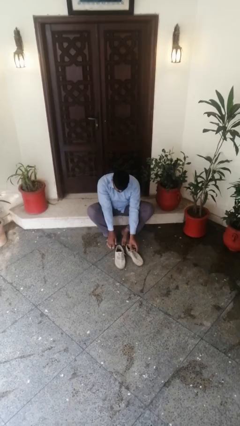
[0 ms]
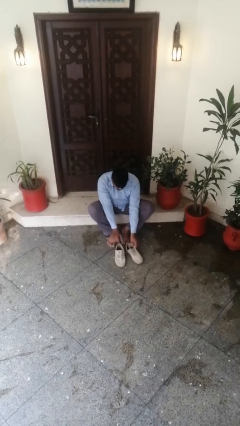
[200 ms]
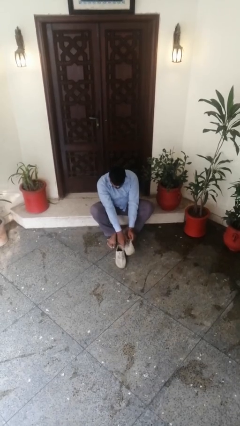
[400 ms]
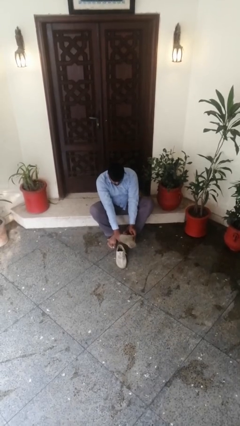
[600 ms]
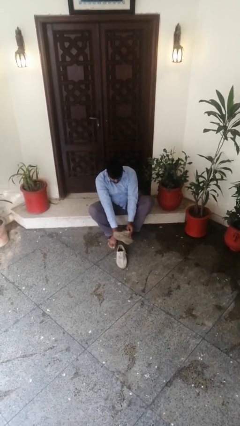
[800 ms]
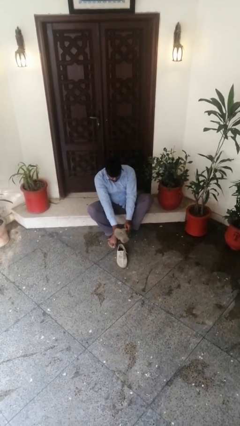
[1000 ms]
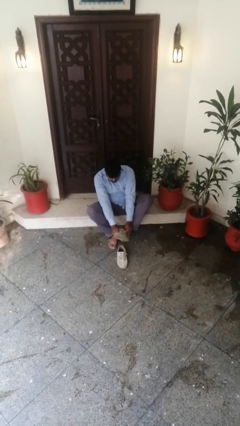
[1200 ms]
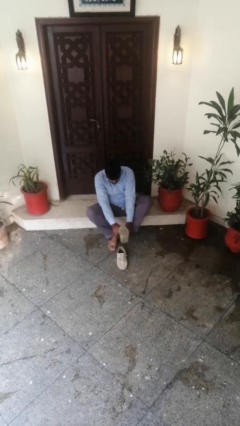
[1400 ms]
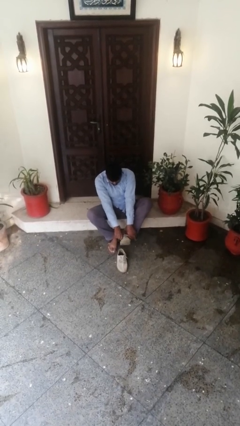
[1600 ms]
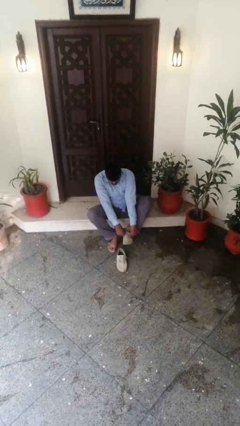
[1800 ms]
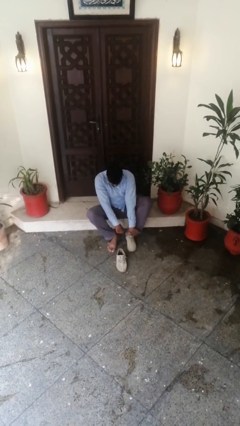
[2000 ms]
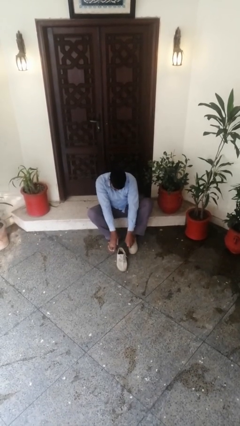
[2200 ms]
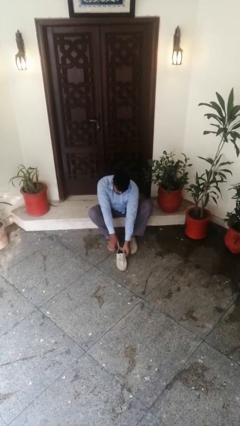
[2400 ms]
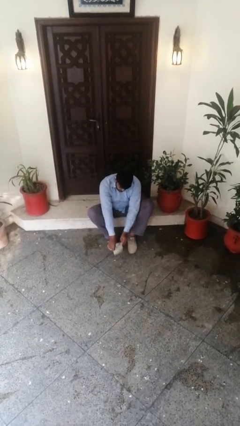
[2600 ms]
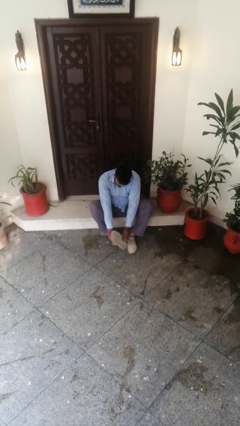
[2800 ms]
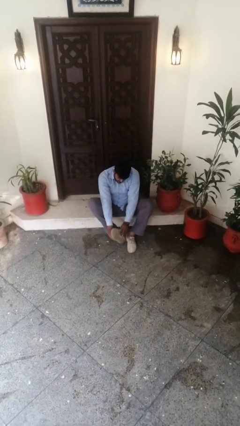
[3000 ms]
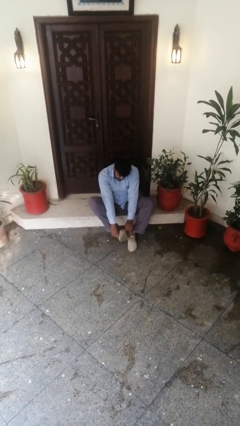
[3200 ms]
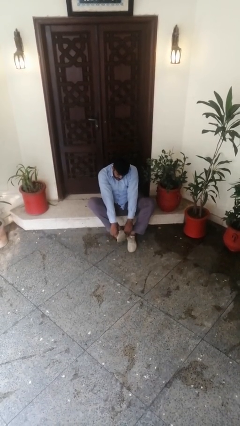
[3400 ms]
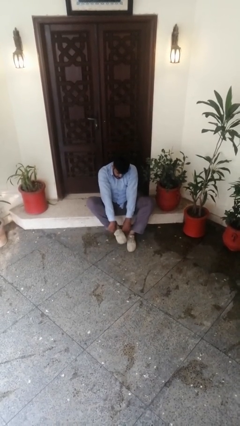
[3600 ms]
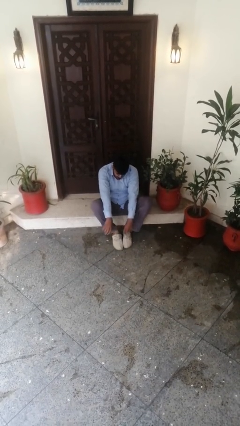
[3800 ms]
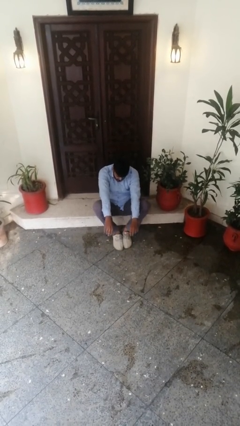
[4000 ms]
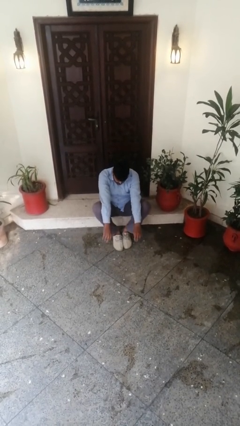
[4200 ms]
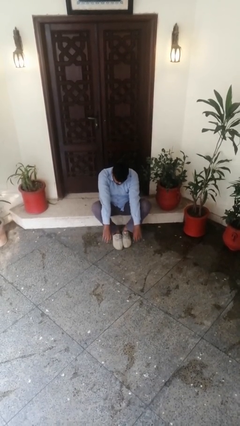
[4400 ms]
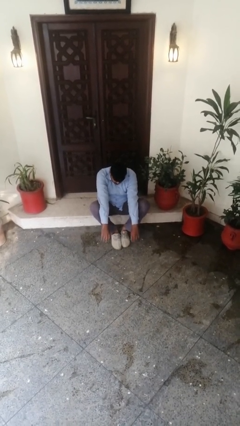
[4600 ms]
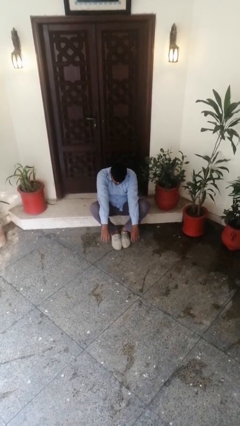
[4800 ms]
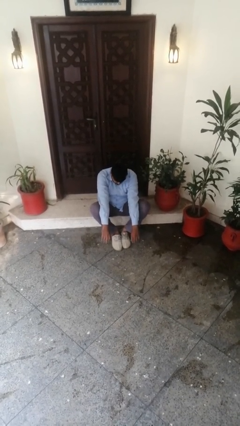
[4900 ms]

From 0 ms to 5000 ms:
person puts on shoes

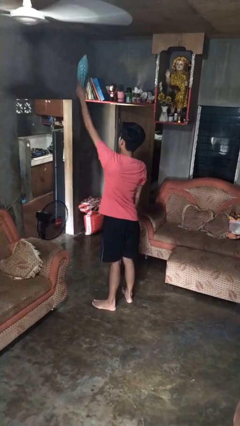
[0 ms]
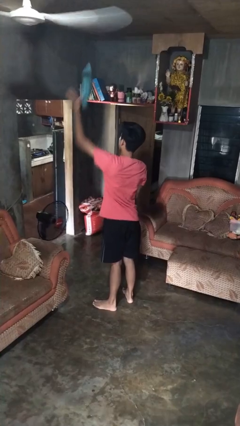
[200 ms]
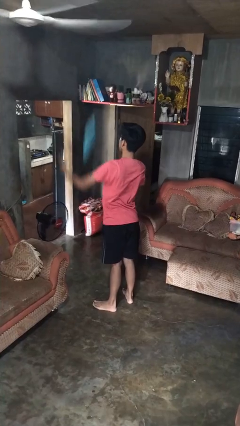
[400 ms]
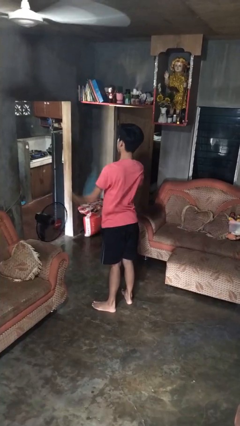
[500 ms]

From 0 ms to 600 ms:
person drops object

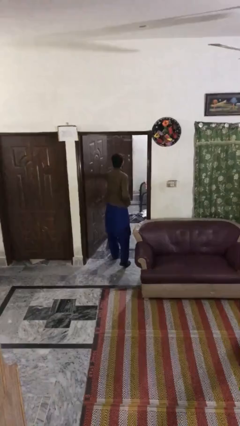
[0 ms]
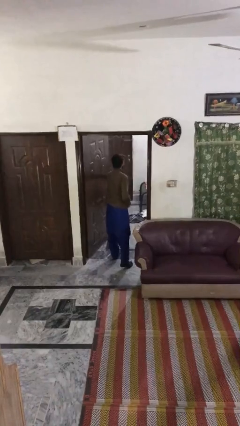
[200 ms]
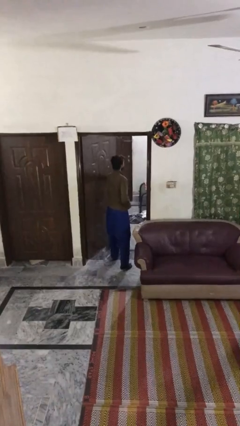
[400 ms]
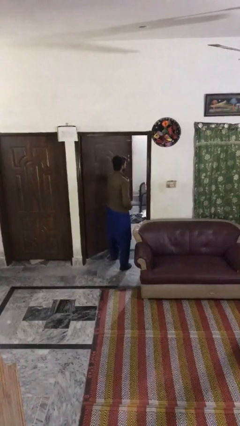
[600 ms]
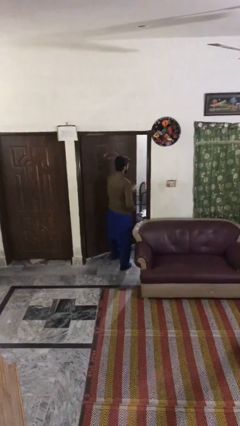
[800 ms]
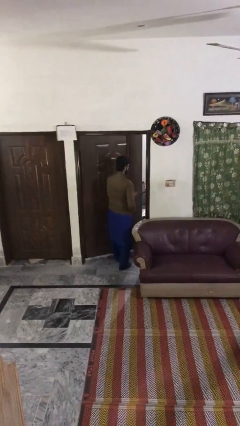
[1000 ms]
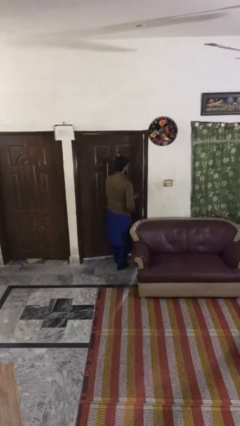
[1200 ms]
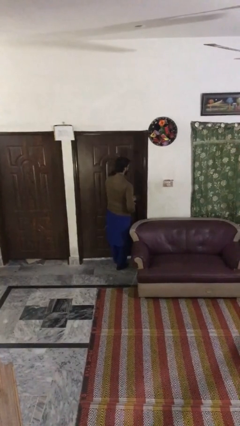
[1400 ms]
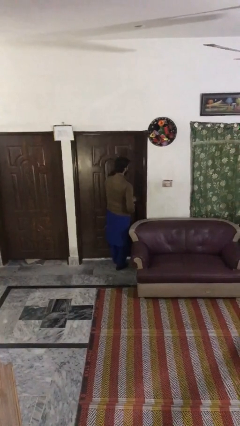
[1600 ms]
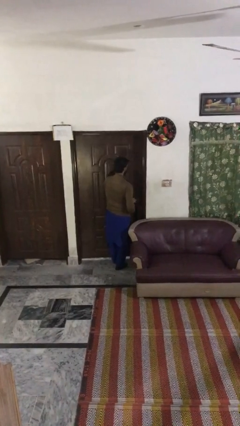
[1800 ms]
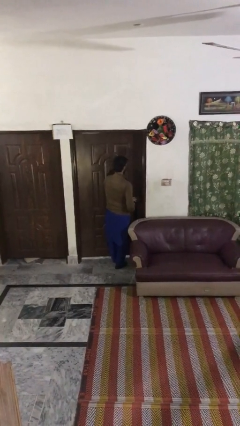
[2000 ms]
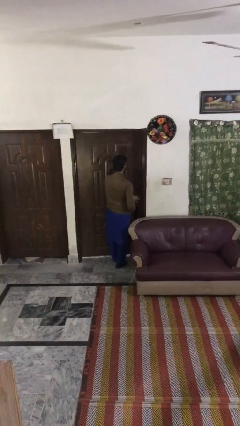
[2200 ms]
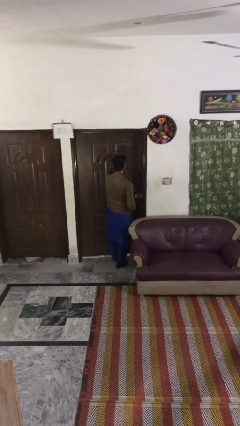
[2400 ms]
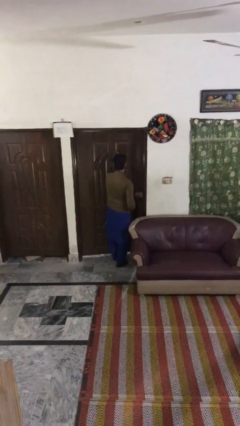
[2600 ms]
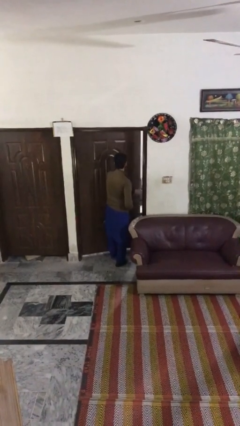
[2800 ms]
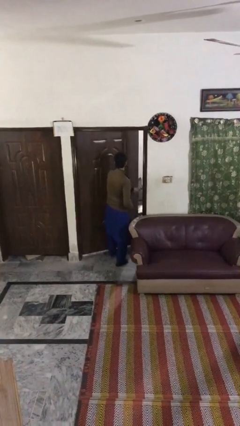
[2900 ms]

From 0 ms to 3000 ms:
person closes facility door

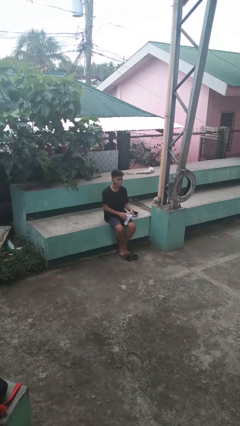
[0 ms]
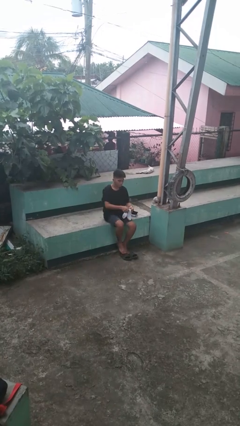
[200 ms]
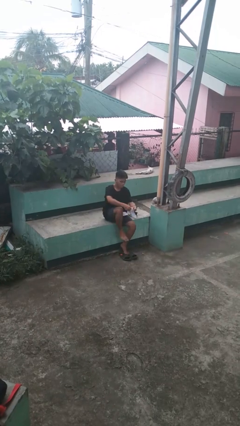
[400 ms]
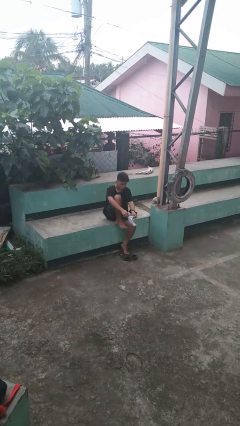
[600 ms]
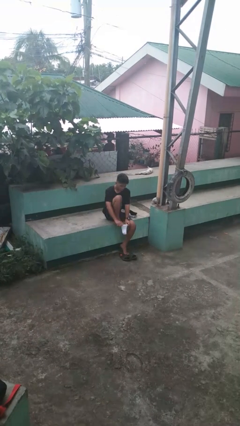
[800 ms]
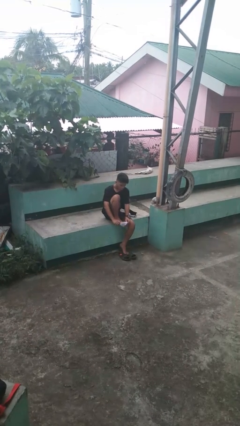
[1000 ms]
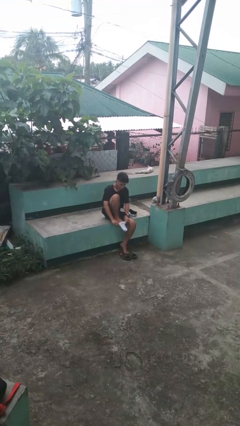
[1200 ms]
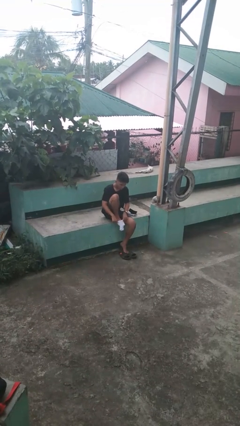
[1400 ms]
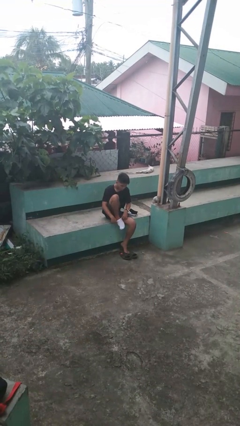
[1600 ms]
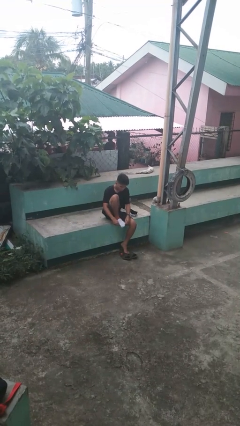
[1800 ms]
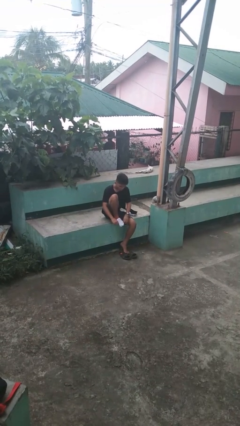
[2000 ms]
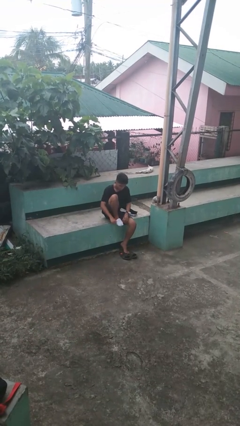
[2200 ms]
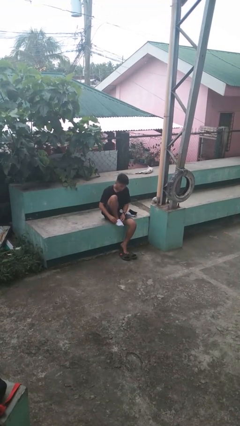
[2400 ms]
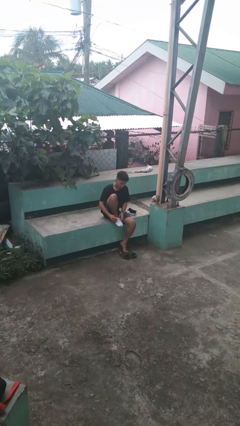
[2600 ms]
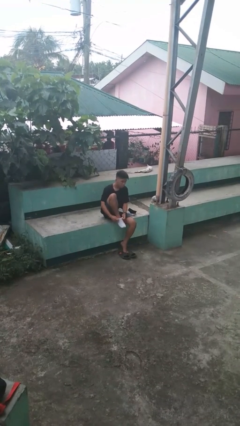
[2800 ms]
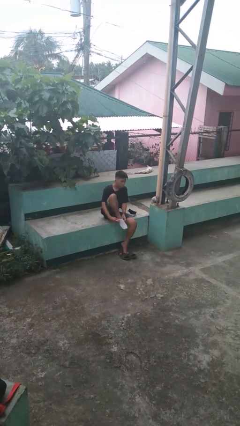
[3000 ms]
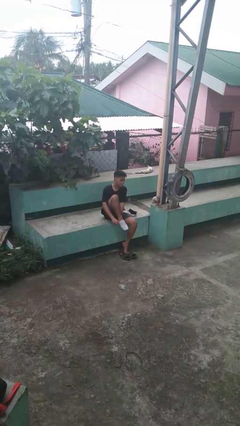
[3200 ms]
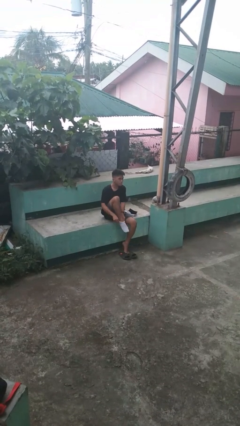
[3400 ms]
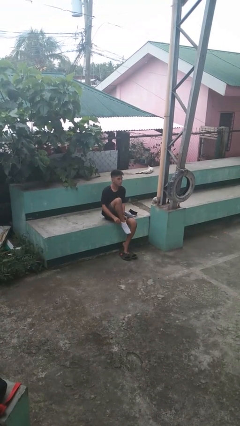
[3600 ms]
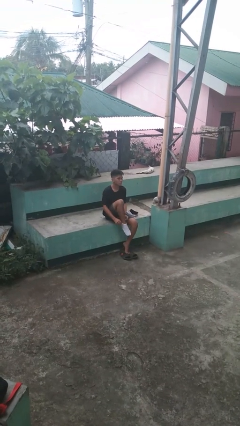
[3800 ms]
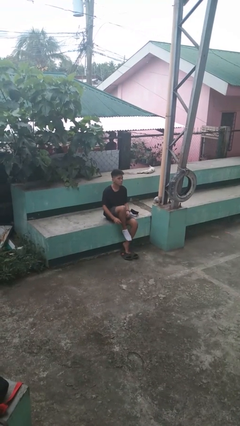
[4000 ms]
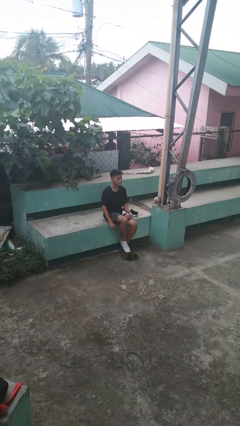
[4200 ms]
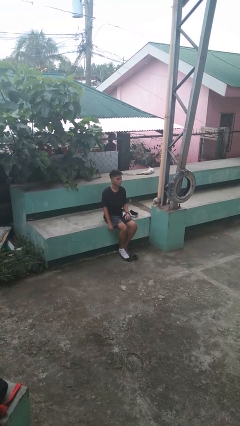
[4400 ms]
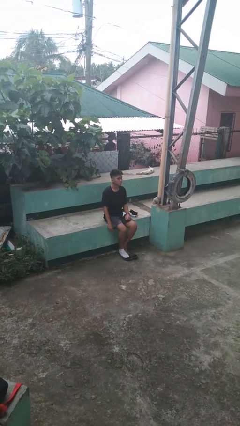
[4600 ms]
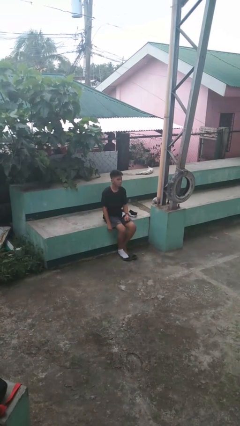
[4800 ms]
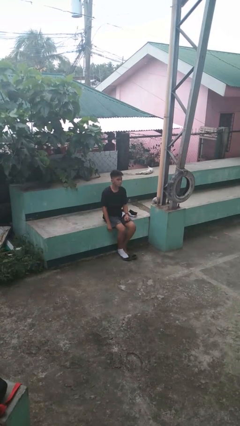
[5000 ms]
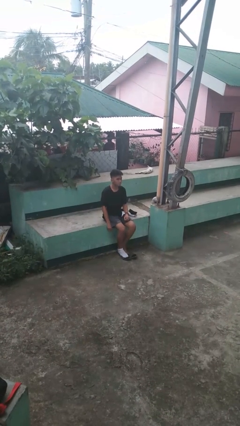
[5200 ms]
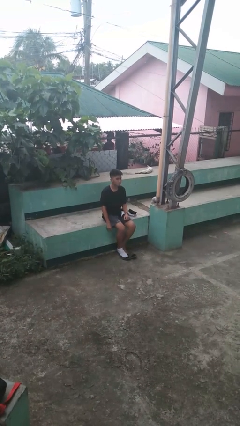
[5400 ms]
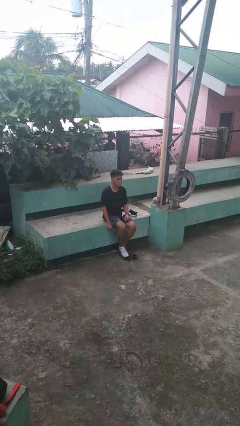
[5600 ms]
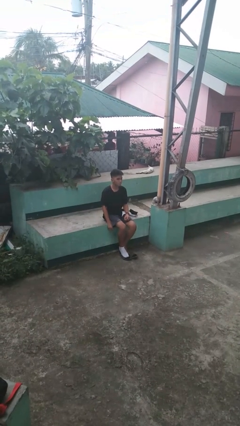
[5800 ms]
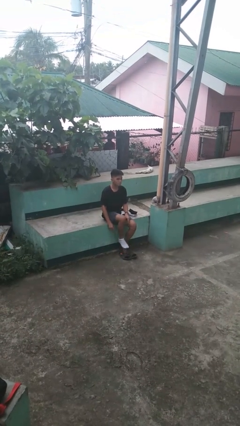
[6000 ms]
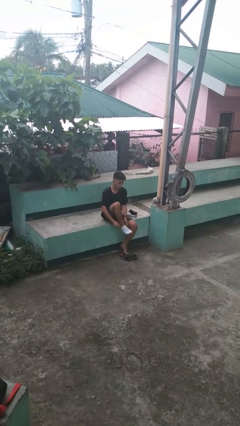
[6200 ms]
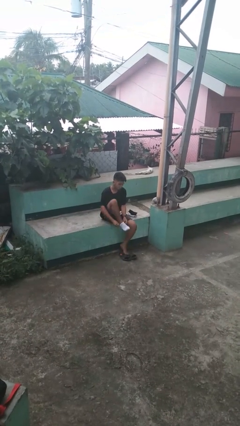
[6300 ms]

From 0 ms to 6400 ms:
person puts on socks

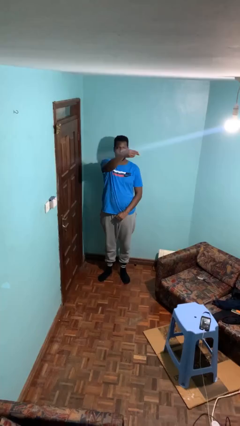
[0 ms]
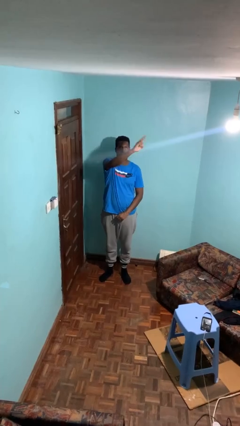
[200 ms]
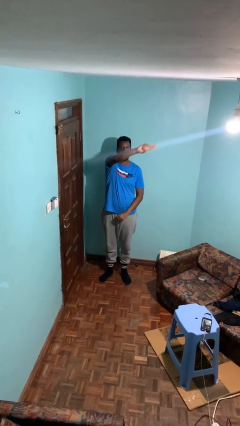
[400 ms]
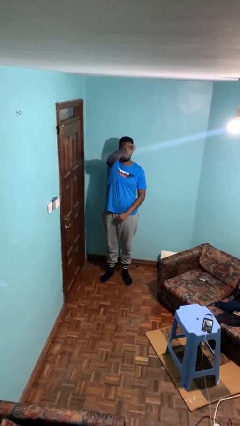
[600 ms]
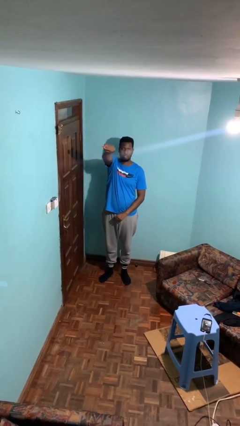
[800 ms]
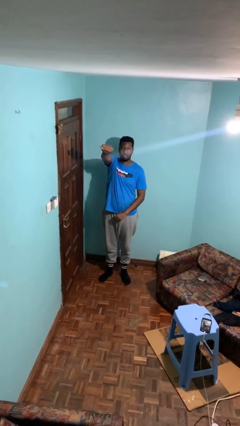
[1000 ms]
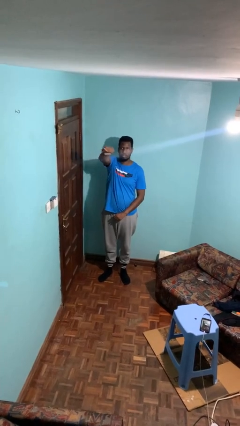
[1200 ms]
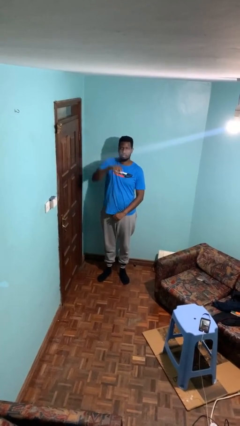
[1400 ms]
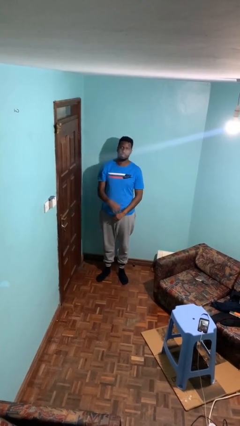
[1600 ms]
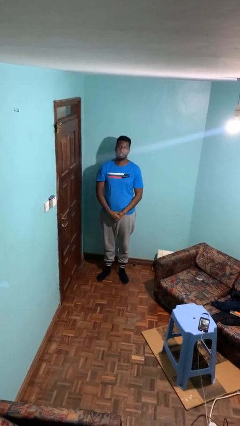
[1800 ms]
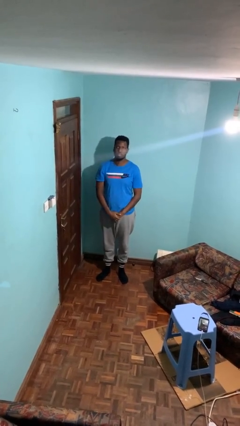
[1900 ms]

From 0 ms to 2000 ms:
person gestures swipe right

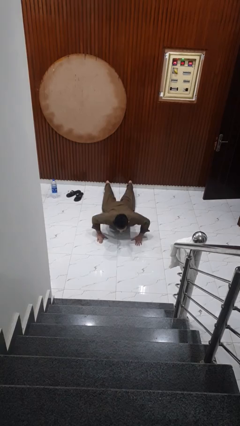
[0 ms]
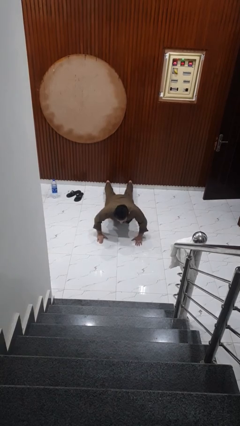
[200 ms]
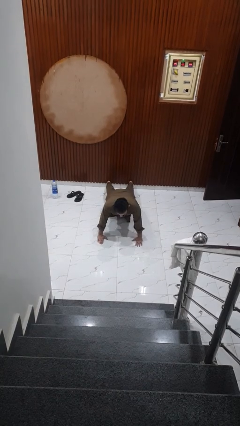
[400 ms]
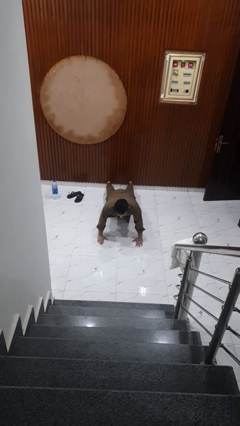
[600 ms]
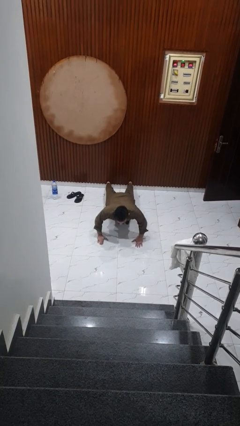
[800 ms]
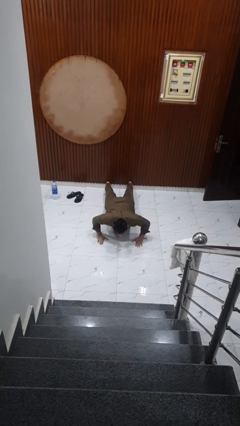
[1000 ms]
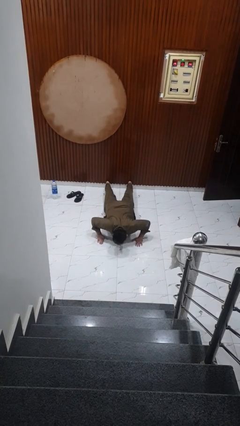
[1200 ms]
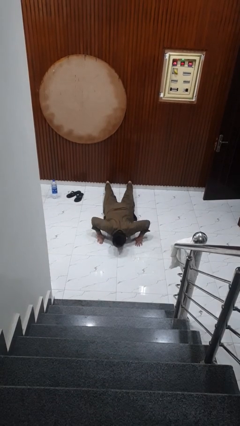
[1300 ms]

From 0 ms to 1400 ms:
person exercises with pushup
